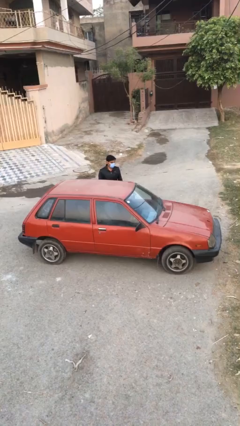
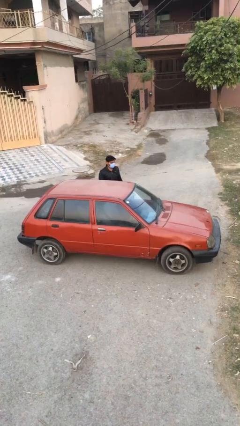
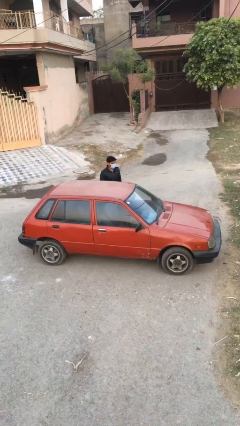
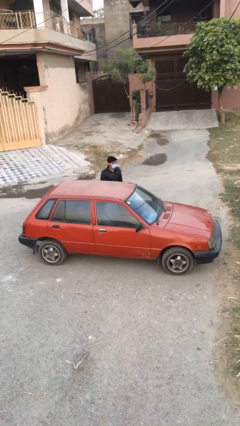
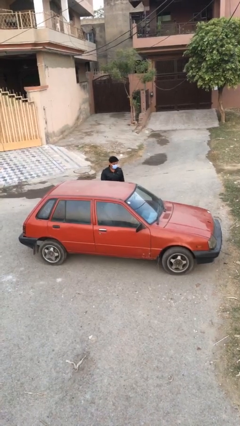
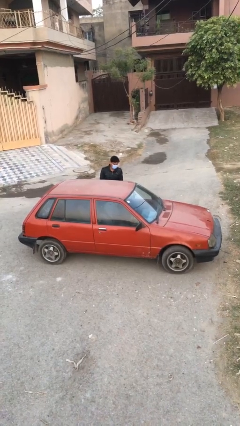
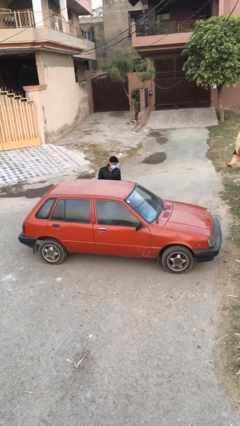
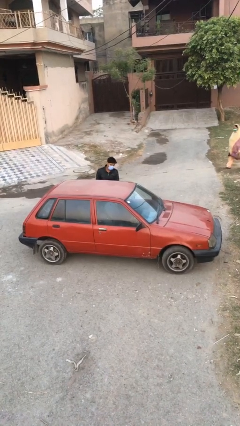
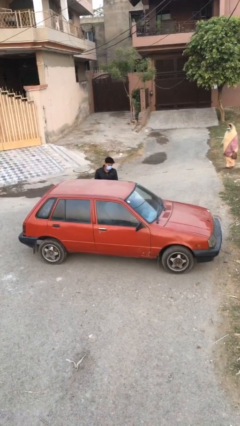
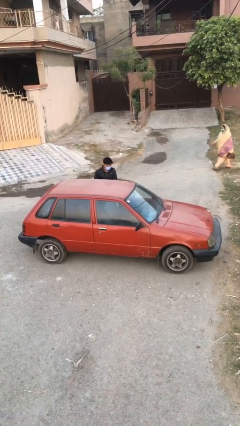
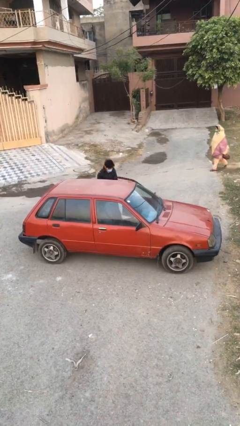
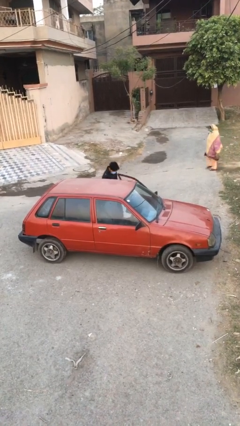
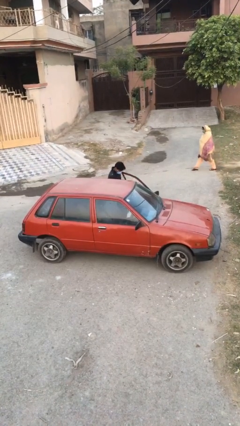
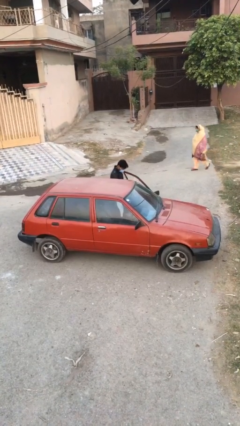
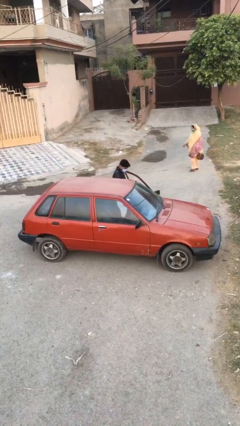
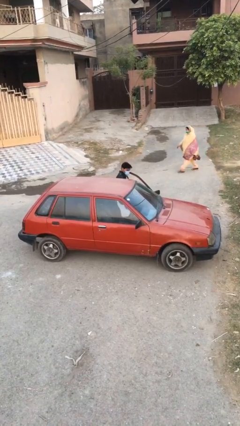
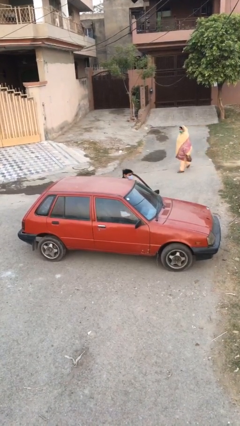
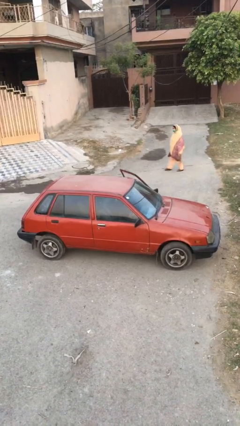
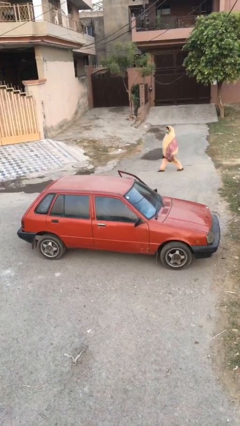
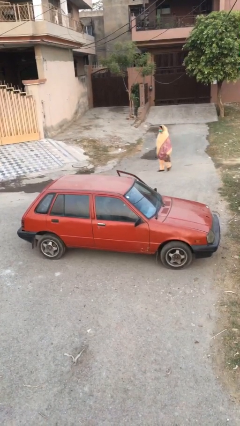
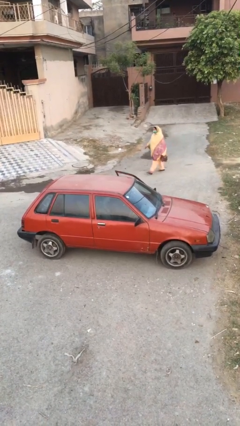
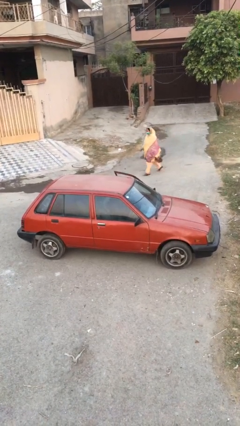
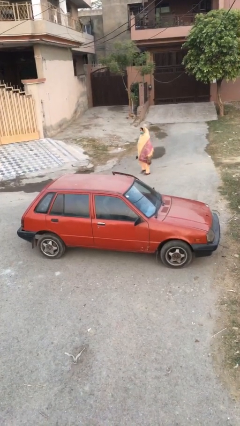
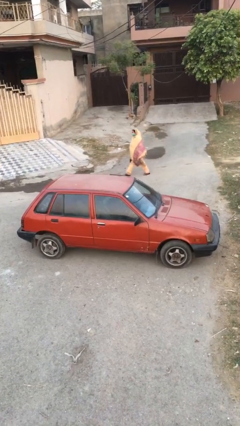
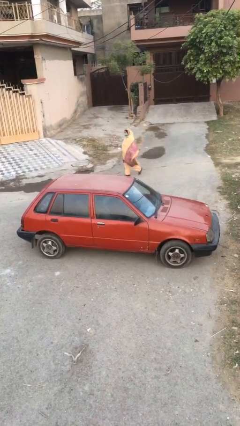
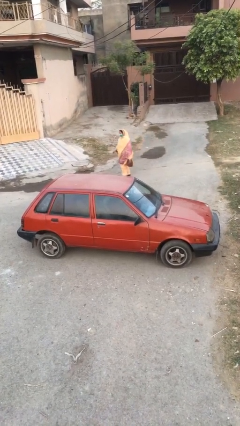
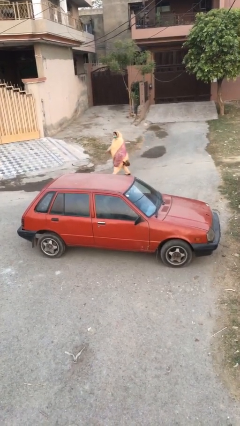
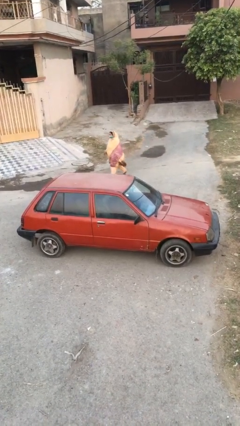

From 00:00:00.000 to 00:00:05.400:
car picks up person

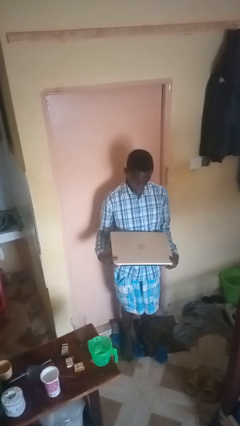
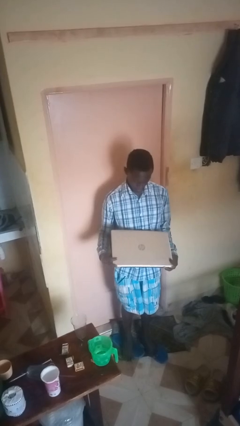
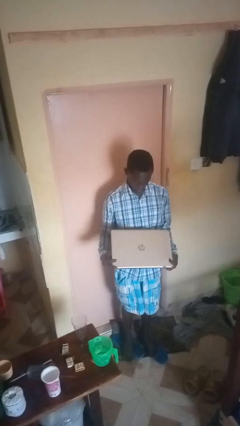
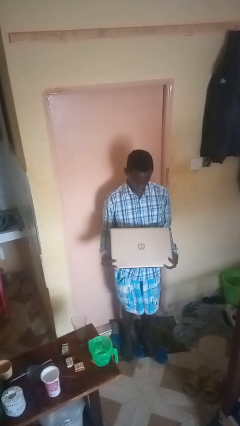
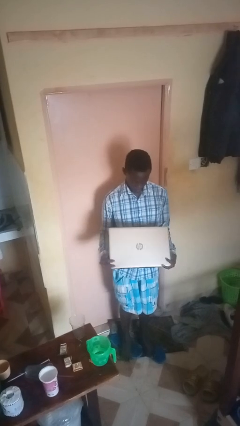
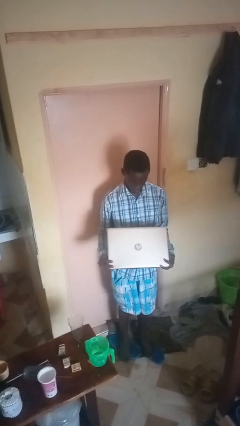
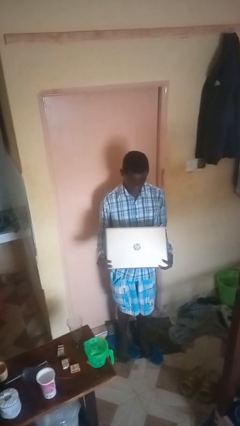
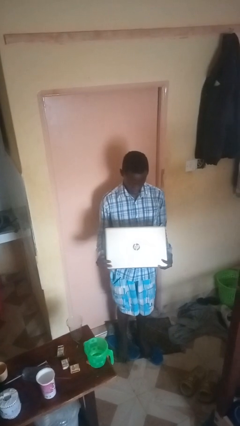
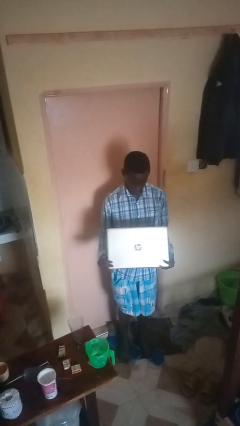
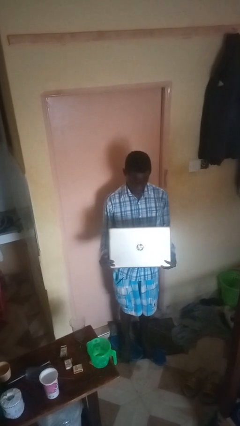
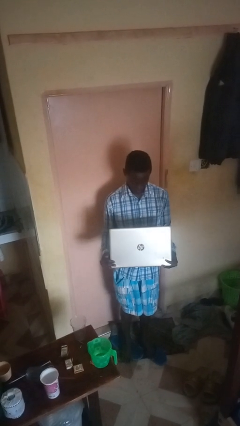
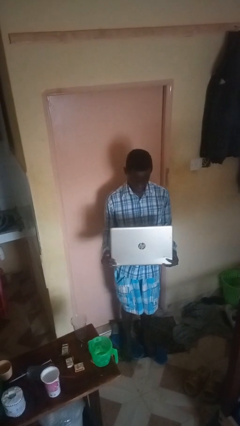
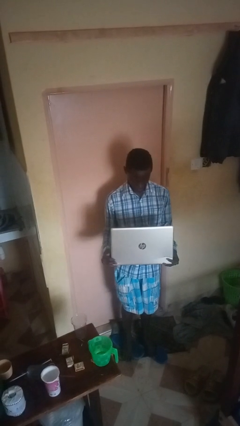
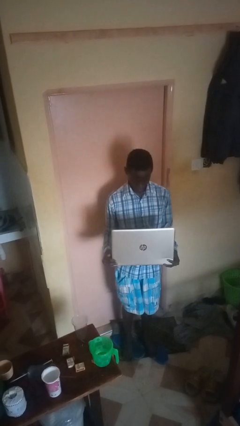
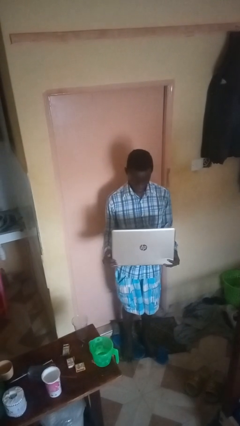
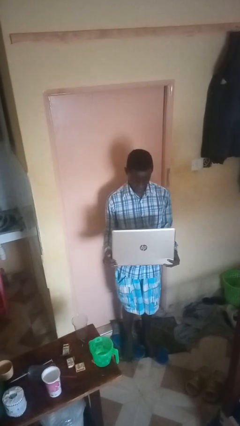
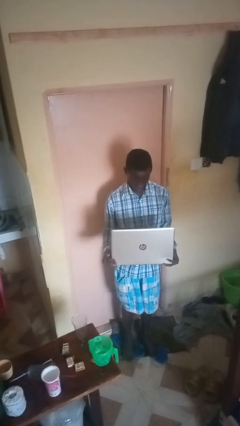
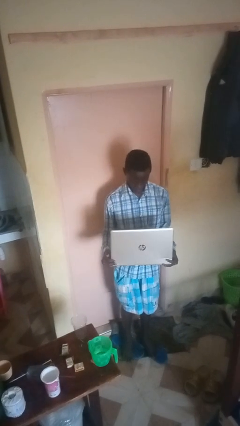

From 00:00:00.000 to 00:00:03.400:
person opens laptop

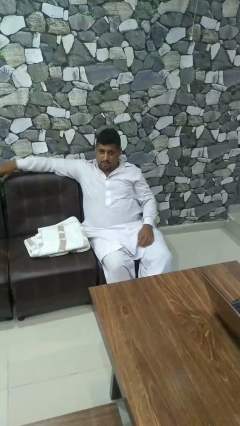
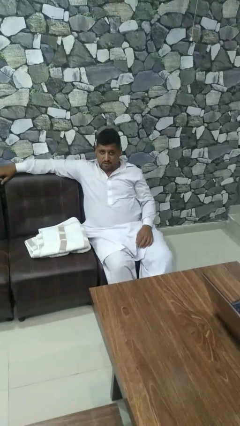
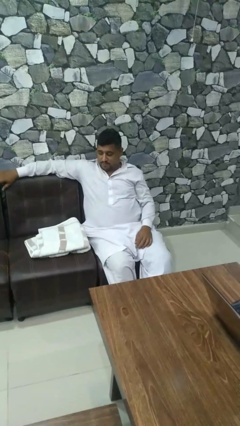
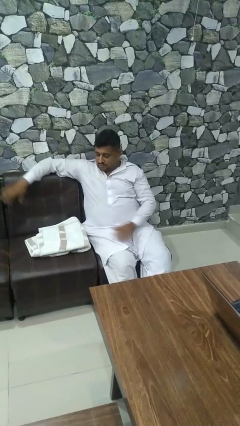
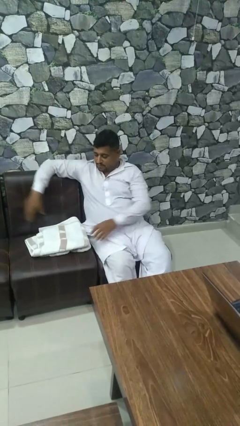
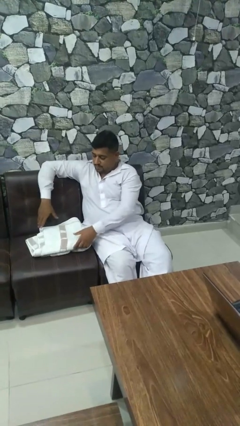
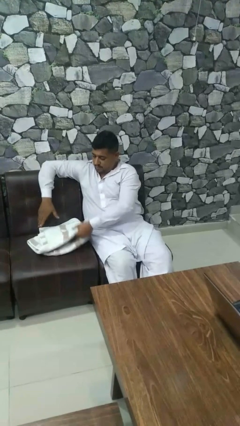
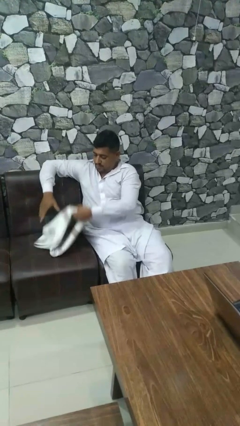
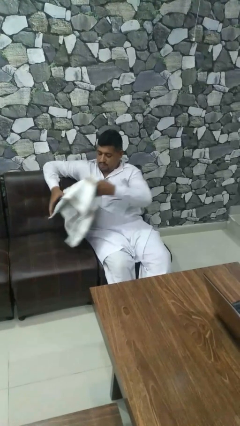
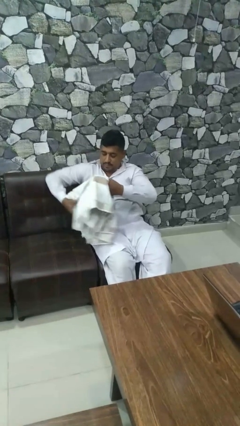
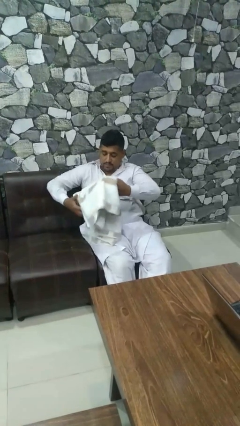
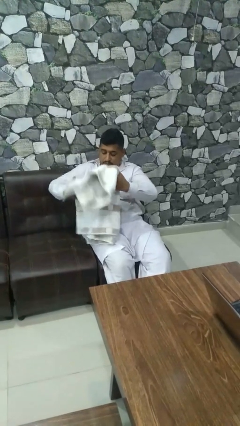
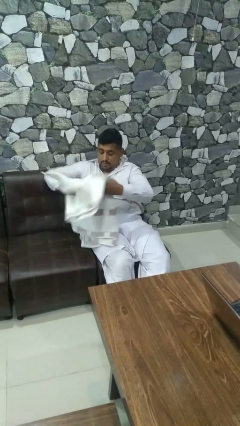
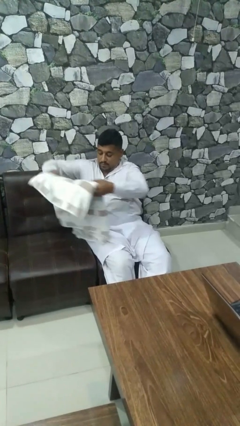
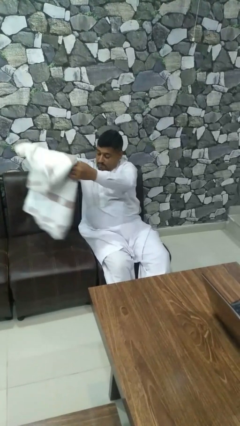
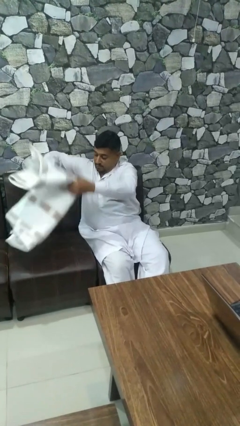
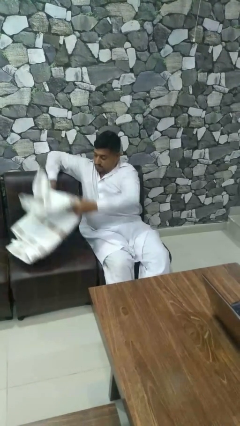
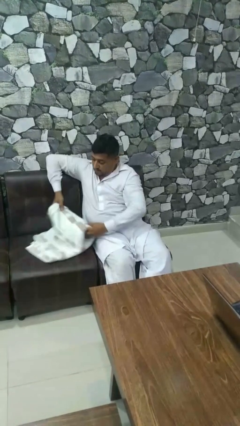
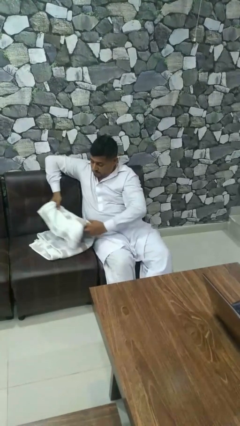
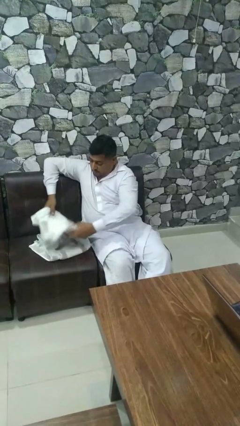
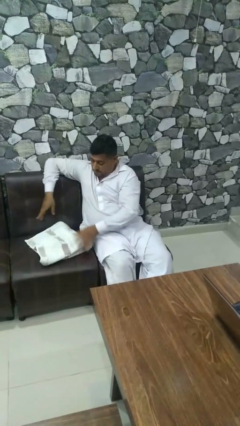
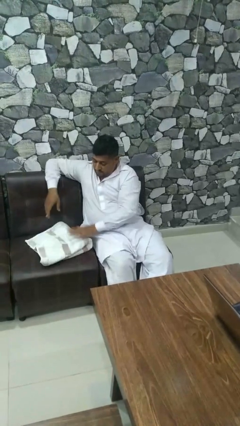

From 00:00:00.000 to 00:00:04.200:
person folds towel

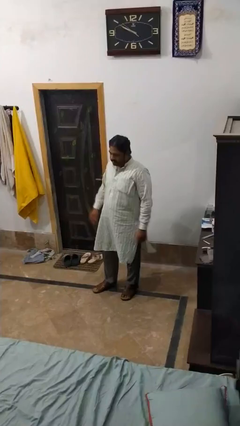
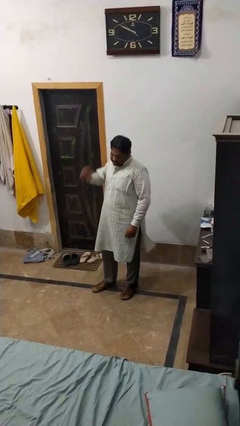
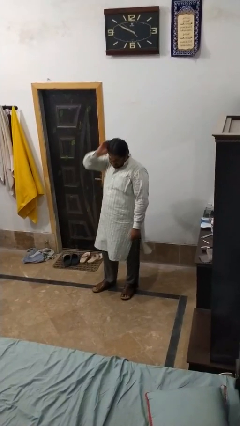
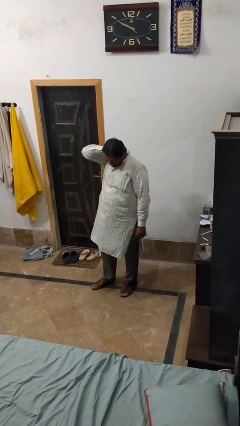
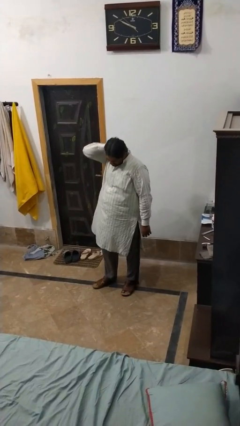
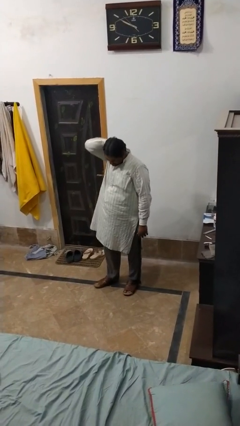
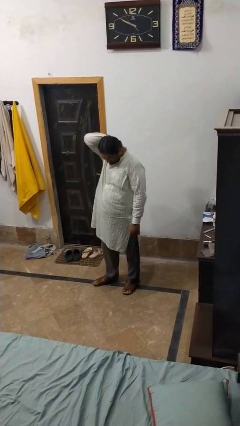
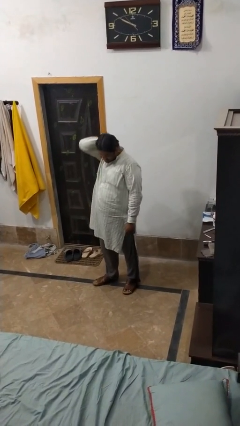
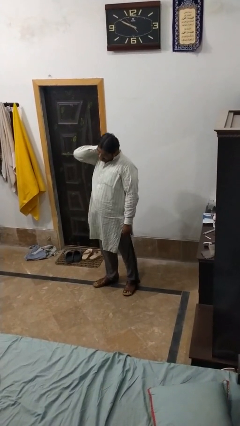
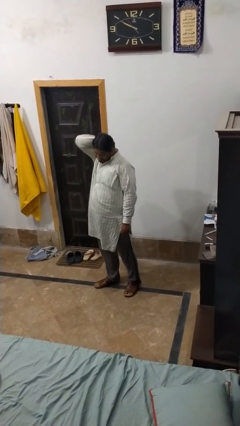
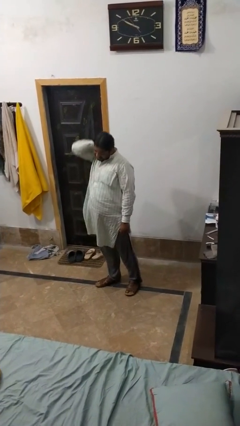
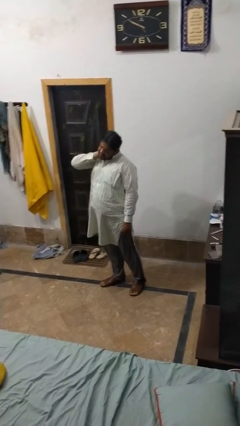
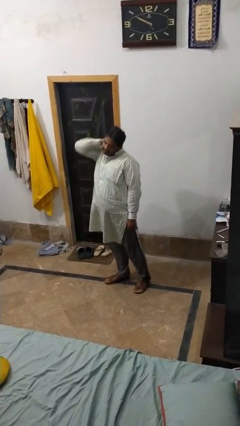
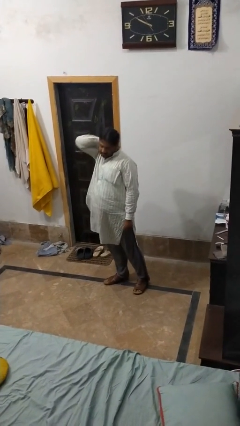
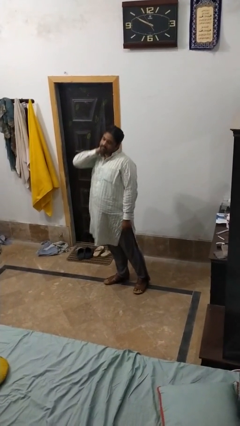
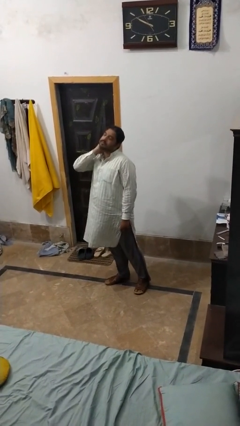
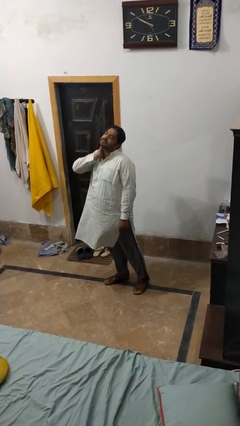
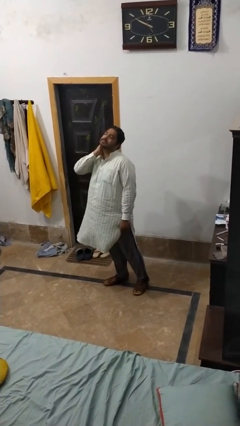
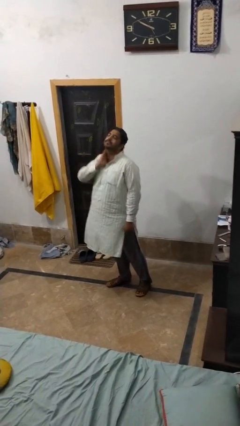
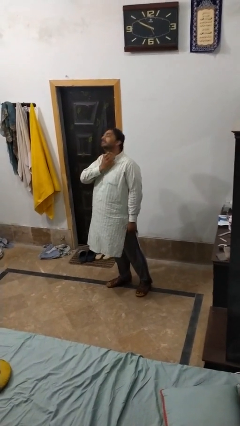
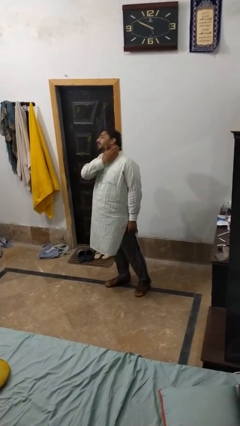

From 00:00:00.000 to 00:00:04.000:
person rubs neck

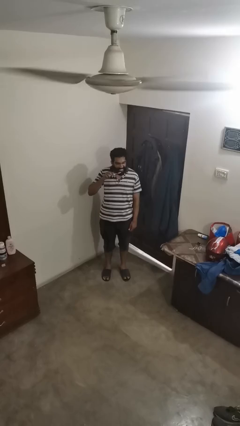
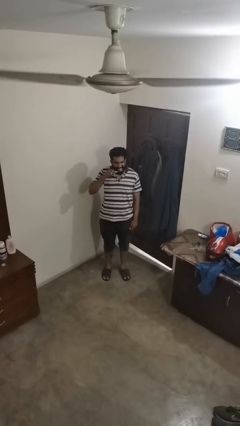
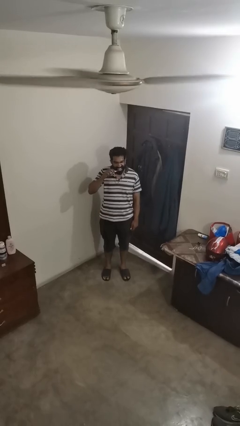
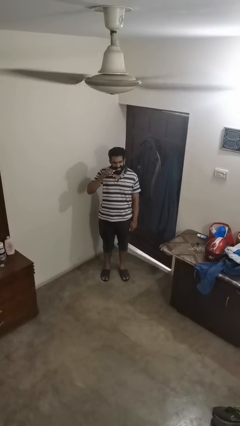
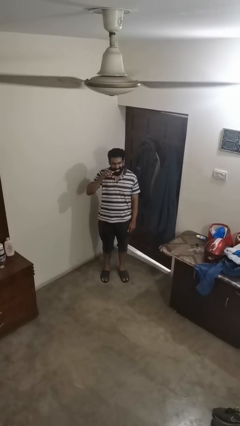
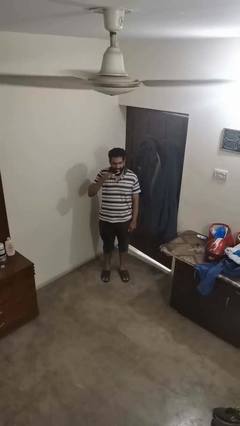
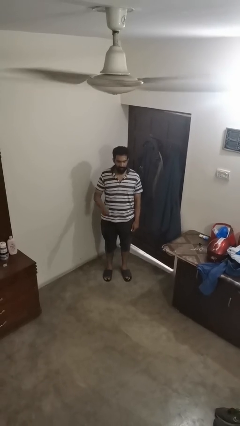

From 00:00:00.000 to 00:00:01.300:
person brushes teeth
